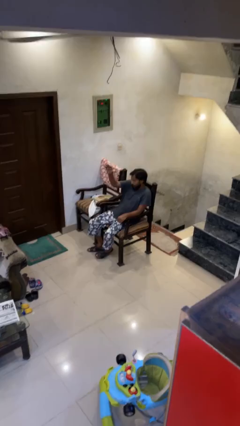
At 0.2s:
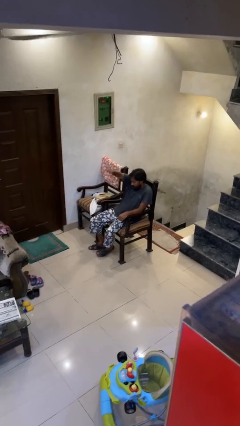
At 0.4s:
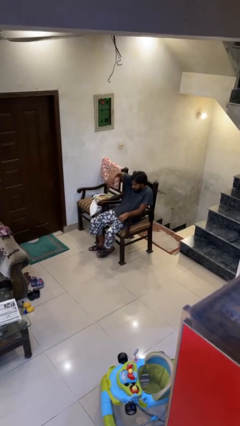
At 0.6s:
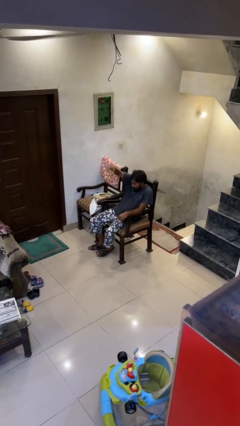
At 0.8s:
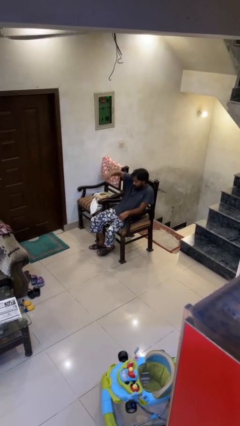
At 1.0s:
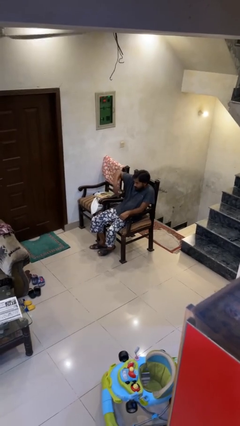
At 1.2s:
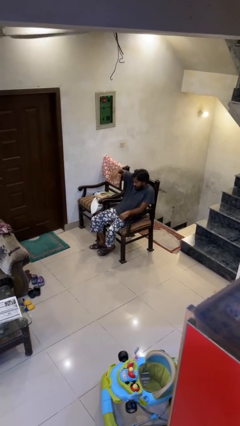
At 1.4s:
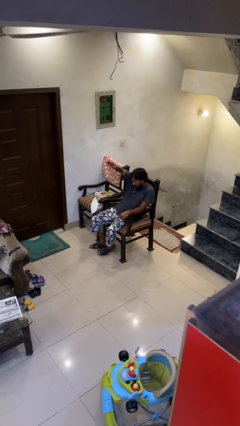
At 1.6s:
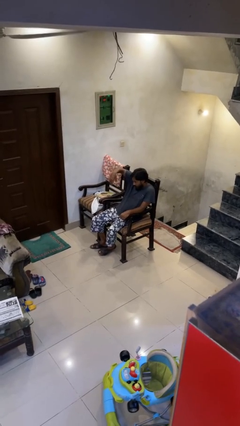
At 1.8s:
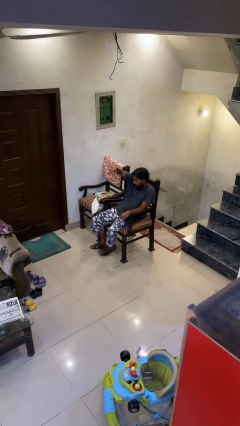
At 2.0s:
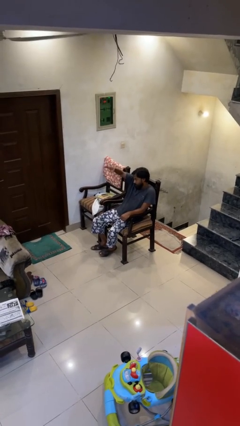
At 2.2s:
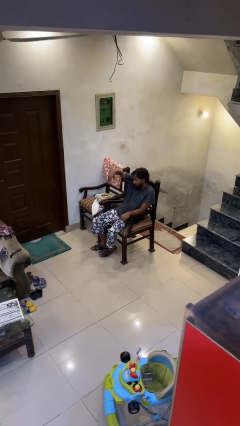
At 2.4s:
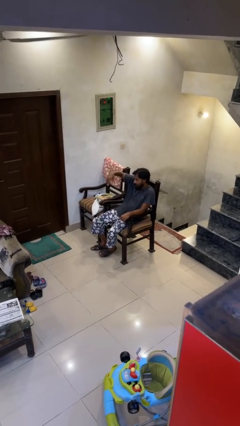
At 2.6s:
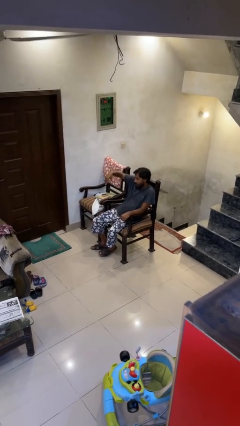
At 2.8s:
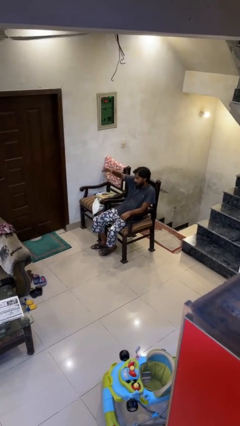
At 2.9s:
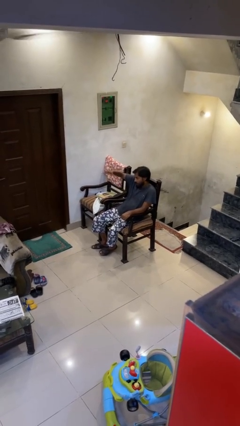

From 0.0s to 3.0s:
person gestures come here

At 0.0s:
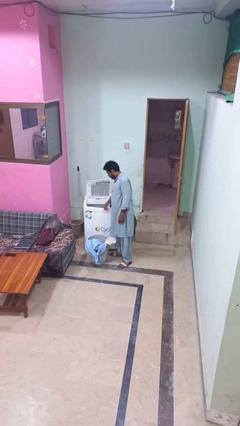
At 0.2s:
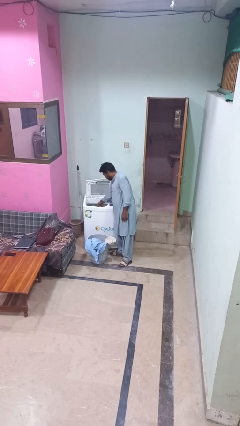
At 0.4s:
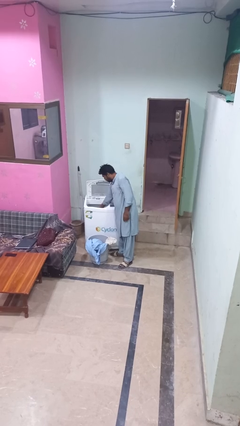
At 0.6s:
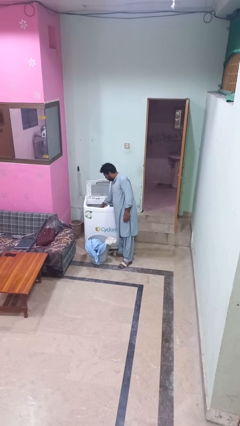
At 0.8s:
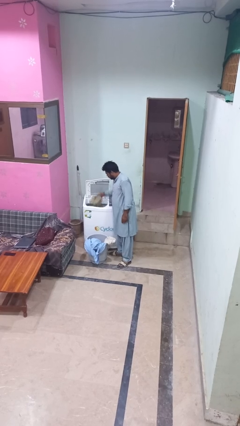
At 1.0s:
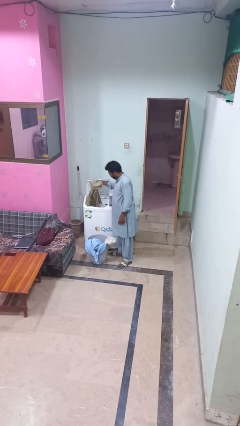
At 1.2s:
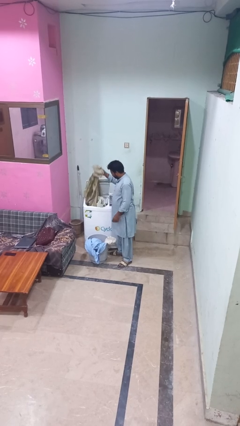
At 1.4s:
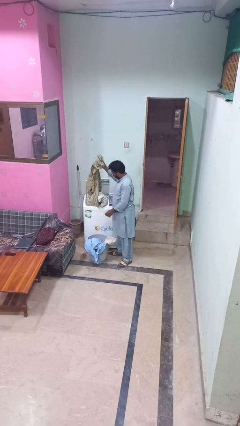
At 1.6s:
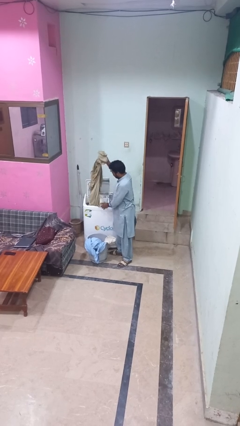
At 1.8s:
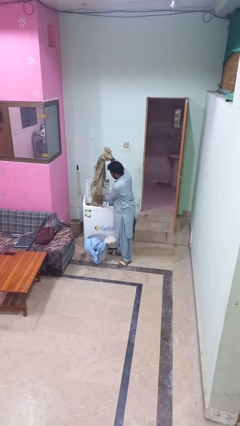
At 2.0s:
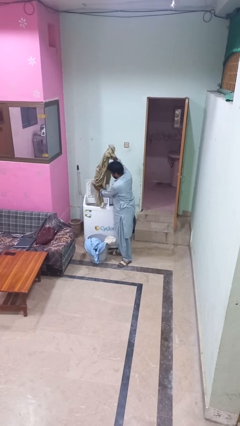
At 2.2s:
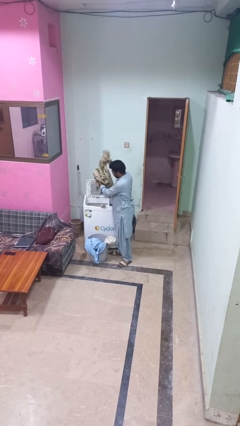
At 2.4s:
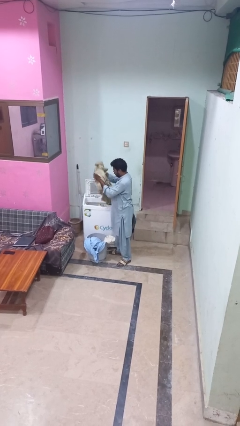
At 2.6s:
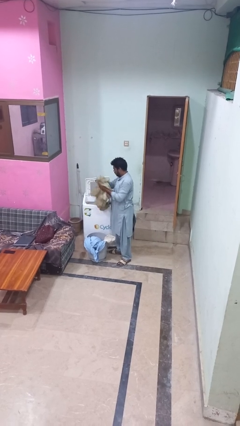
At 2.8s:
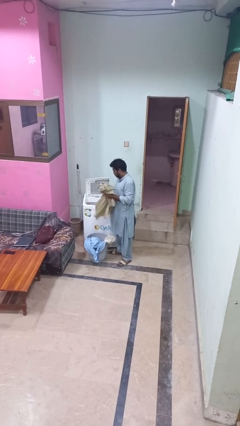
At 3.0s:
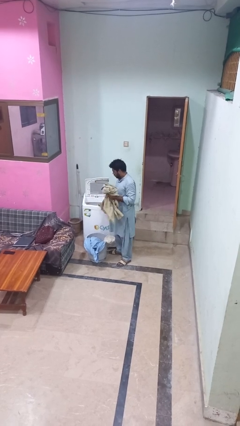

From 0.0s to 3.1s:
person unloads clotheswasher

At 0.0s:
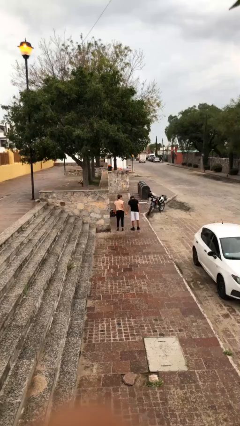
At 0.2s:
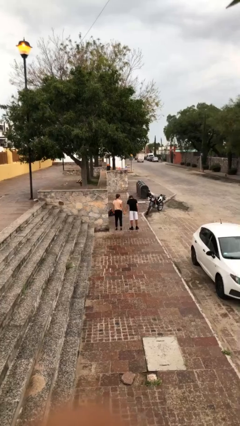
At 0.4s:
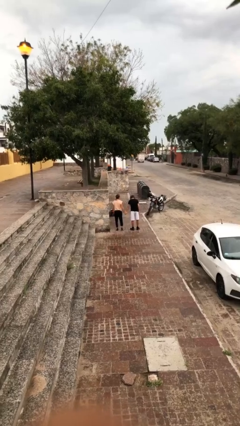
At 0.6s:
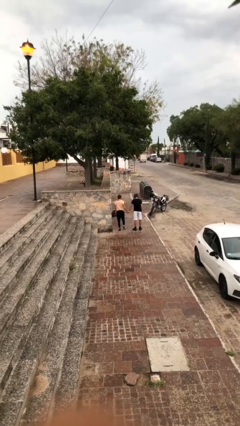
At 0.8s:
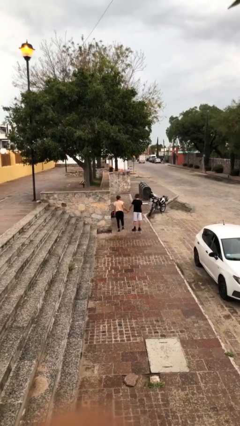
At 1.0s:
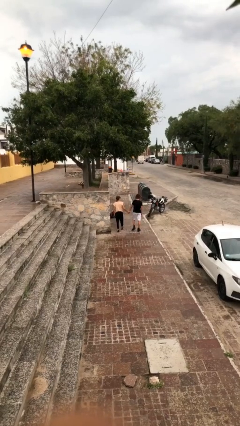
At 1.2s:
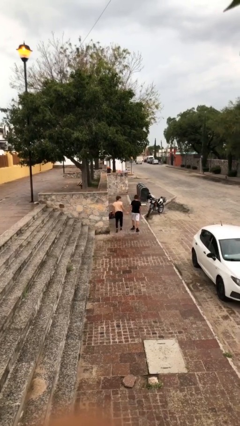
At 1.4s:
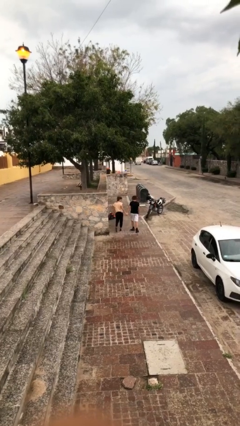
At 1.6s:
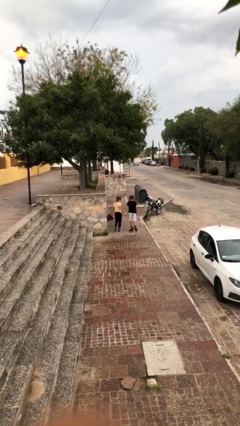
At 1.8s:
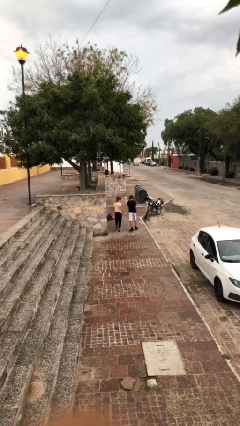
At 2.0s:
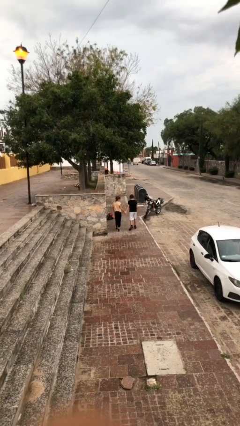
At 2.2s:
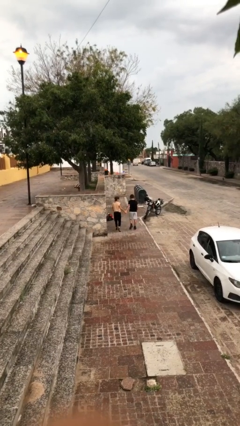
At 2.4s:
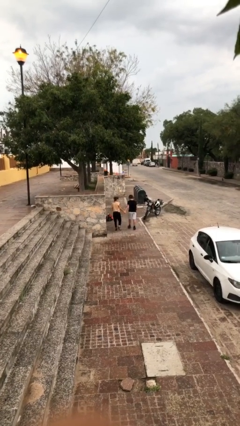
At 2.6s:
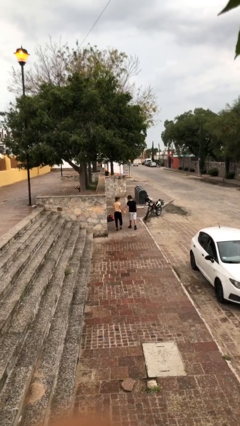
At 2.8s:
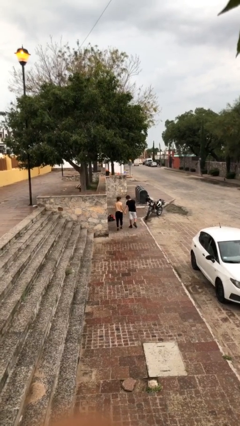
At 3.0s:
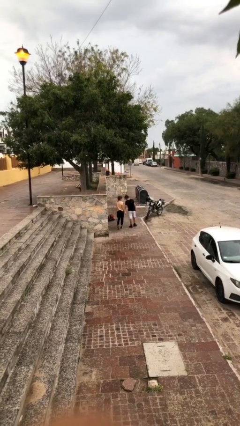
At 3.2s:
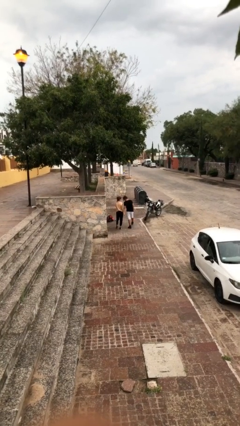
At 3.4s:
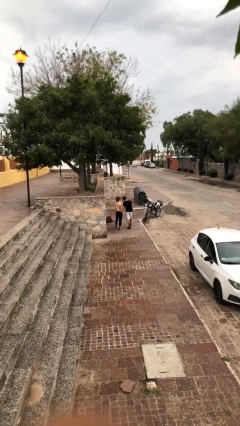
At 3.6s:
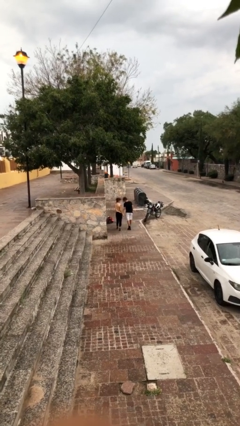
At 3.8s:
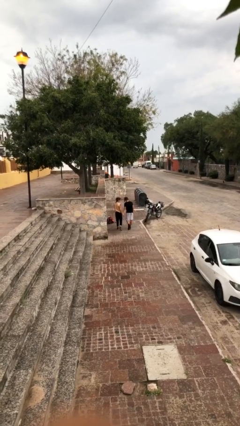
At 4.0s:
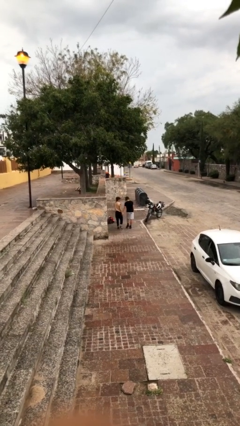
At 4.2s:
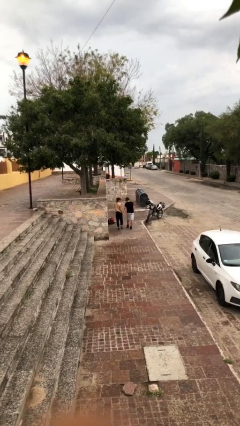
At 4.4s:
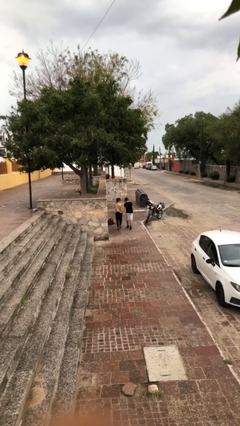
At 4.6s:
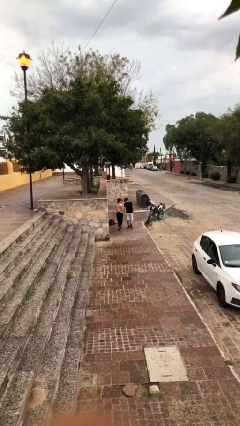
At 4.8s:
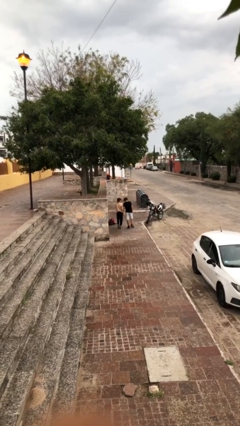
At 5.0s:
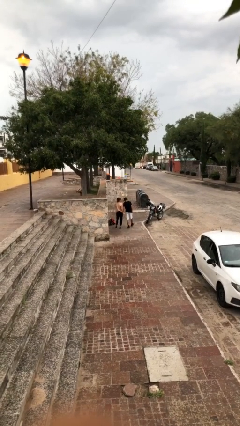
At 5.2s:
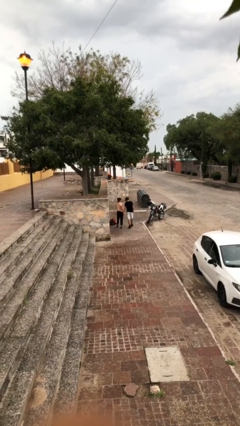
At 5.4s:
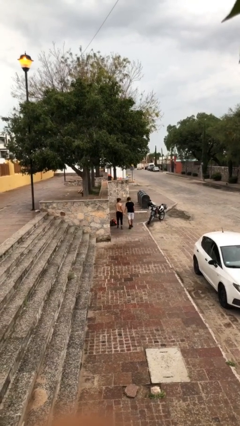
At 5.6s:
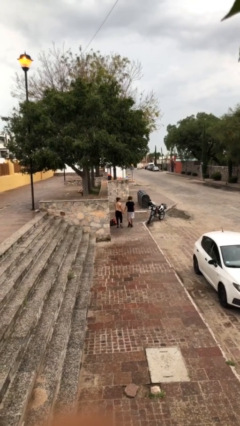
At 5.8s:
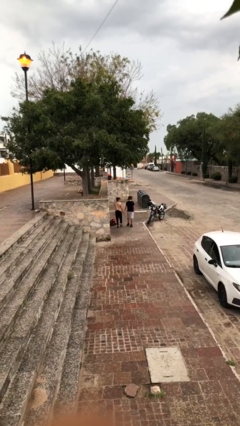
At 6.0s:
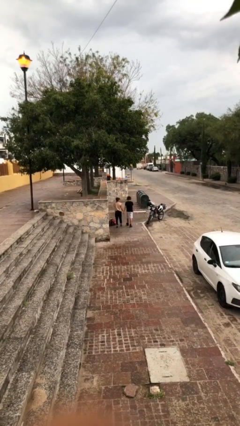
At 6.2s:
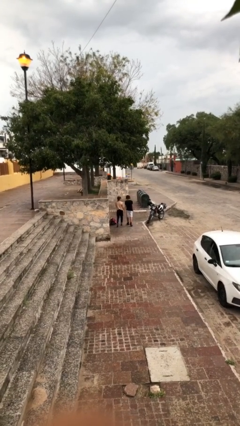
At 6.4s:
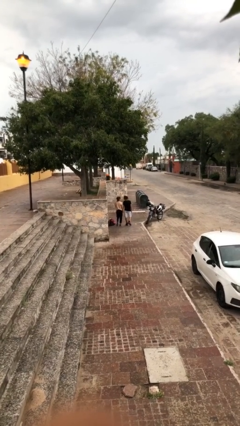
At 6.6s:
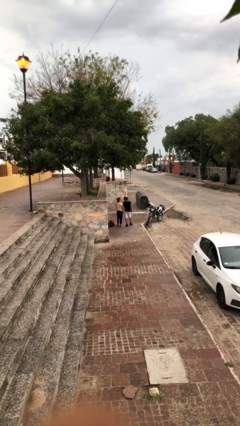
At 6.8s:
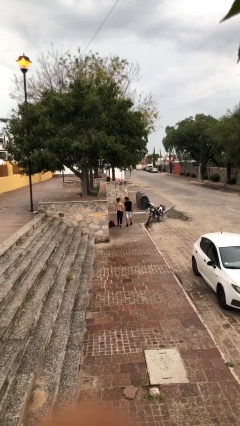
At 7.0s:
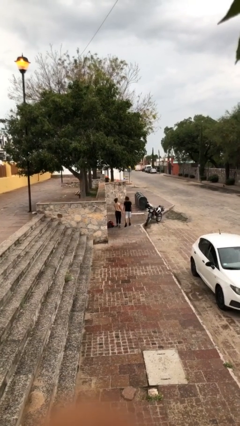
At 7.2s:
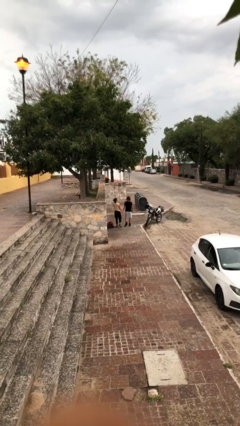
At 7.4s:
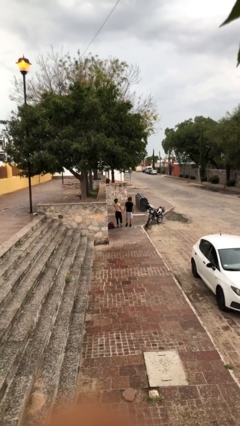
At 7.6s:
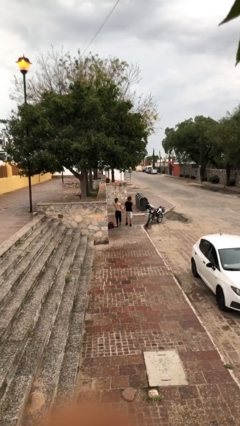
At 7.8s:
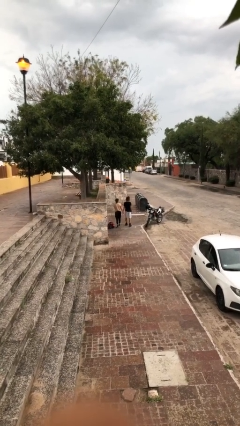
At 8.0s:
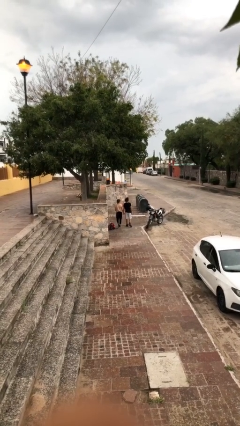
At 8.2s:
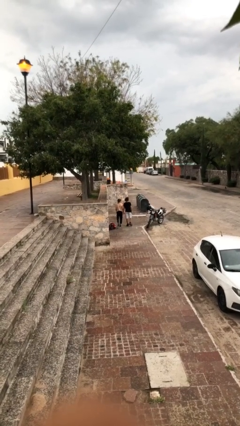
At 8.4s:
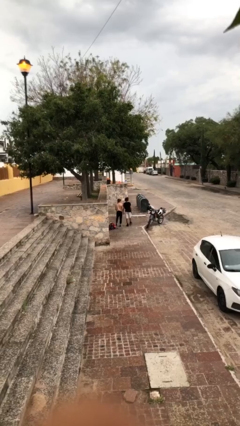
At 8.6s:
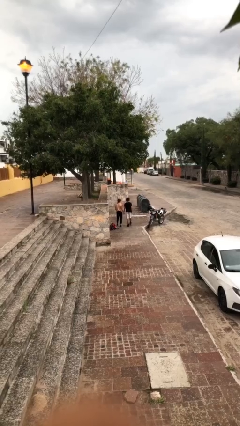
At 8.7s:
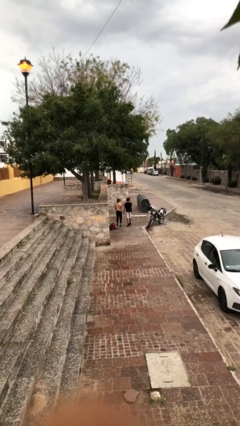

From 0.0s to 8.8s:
person holds hand

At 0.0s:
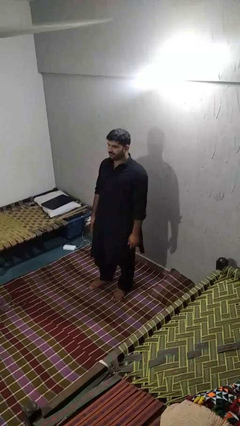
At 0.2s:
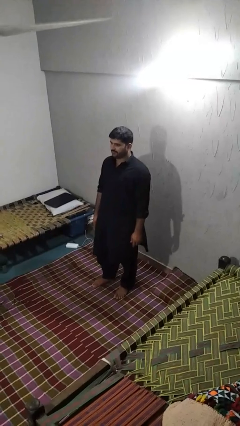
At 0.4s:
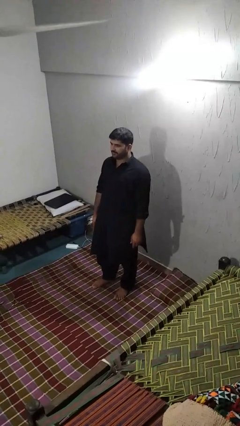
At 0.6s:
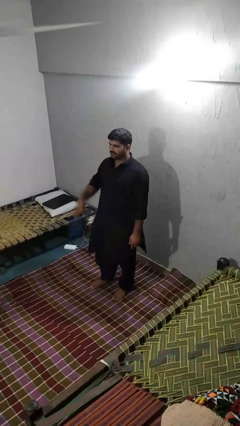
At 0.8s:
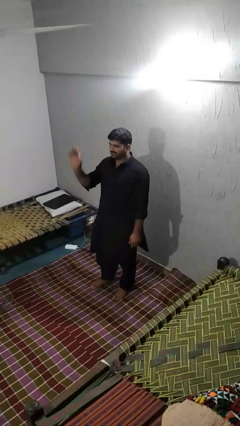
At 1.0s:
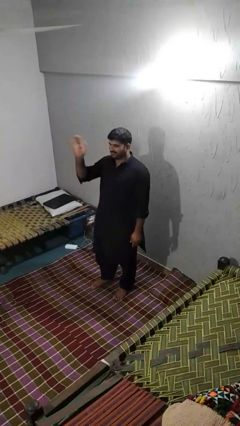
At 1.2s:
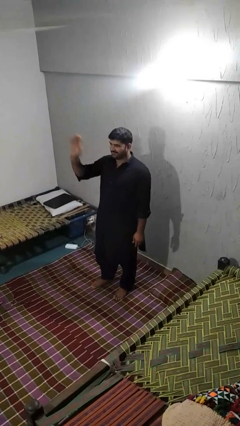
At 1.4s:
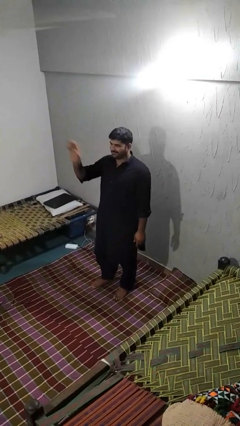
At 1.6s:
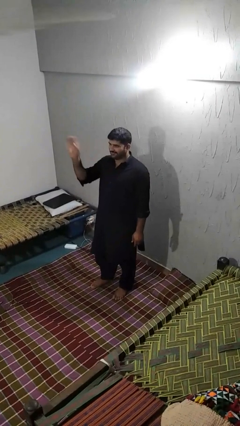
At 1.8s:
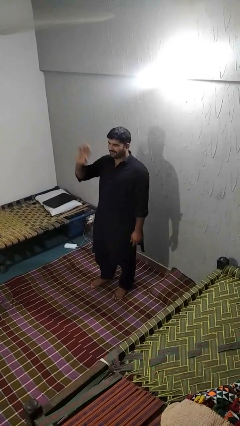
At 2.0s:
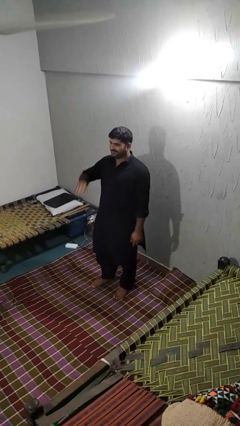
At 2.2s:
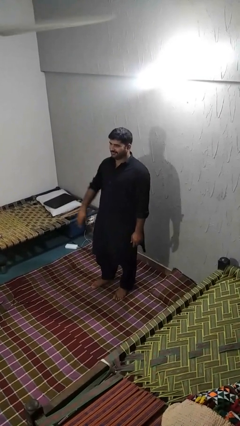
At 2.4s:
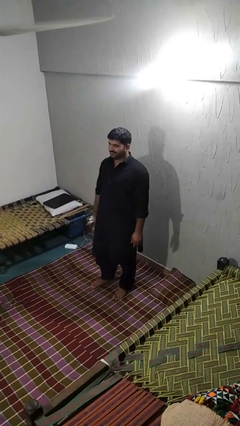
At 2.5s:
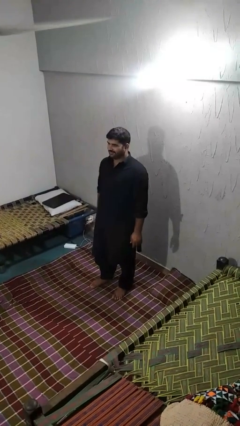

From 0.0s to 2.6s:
person waves at person

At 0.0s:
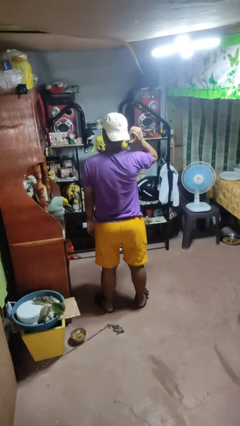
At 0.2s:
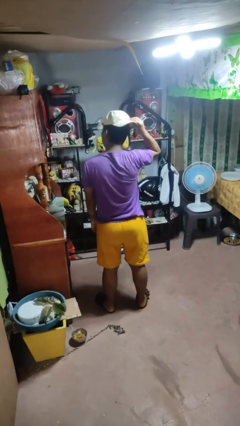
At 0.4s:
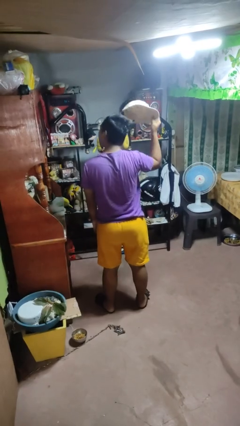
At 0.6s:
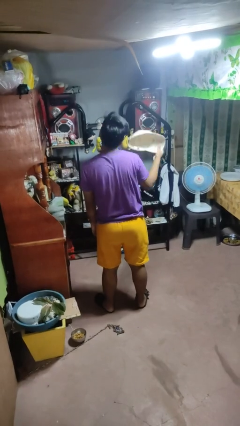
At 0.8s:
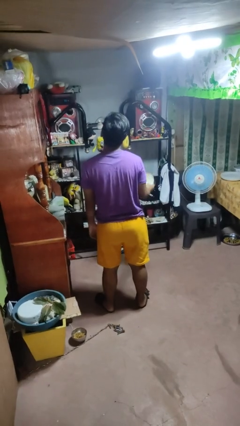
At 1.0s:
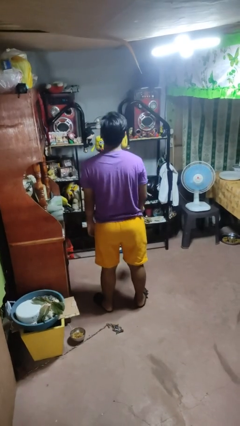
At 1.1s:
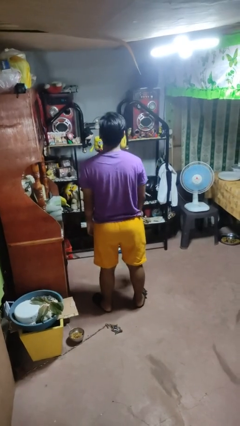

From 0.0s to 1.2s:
person takes off hat
